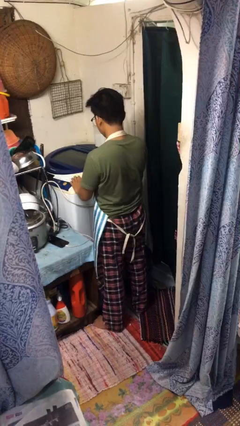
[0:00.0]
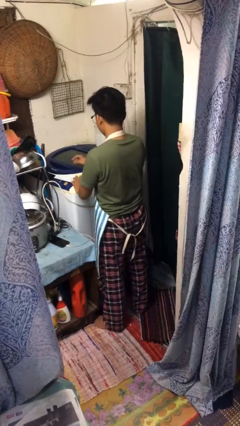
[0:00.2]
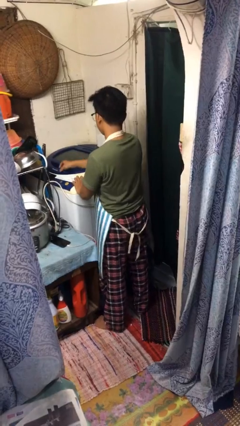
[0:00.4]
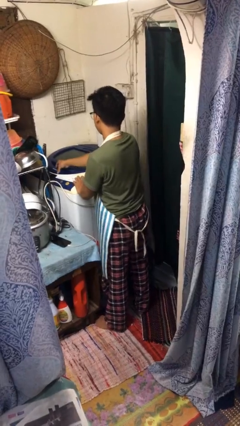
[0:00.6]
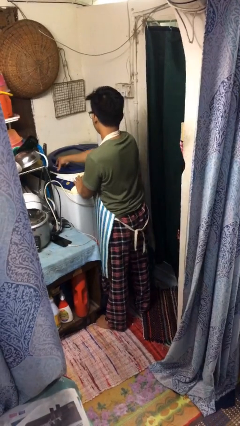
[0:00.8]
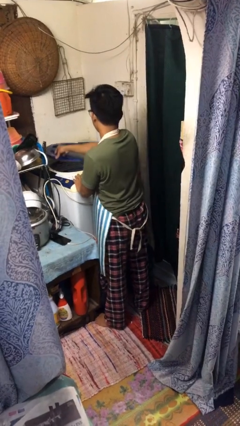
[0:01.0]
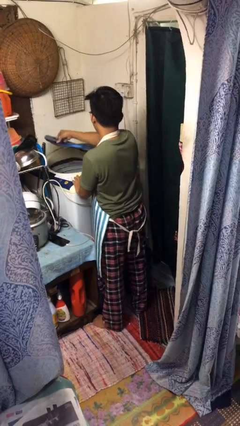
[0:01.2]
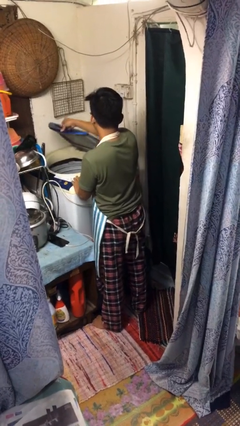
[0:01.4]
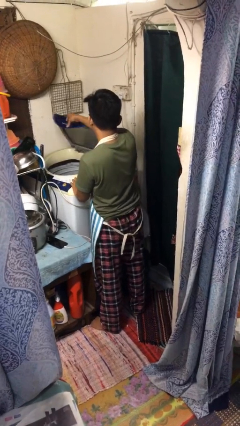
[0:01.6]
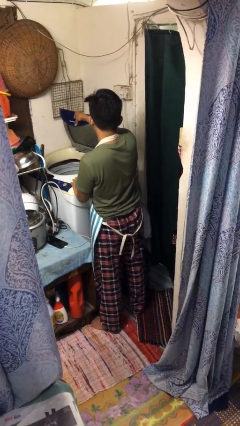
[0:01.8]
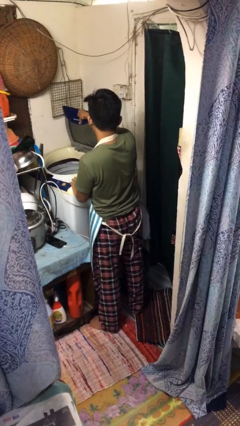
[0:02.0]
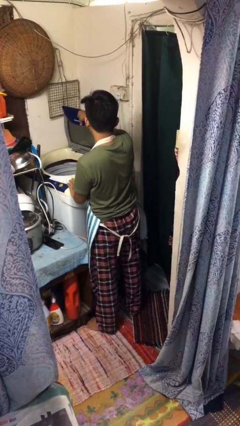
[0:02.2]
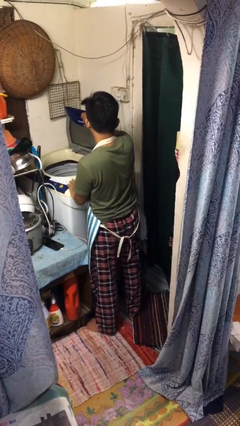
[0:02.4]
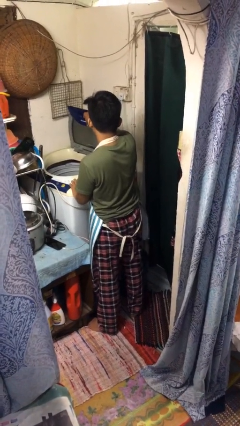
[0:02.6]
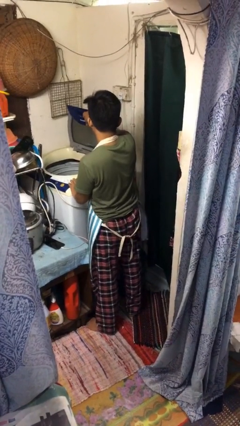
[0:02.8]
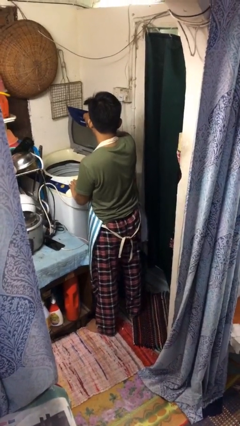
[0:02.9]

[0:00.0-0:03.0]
person opens clothes washer

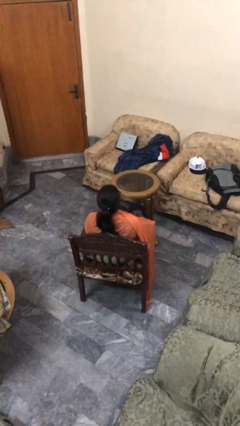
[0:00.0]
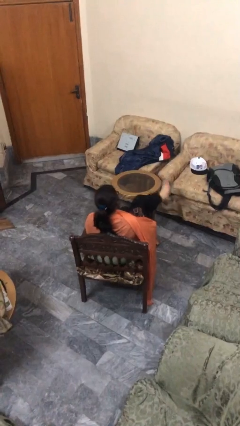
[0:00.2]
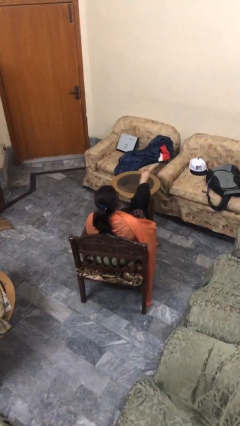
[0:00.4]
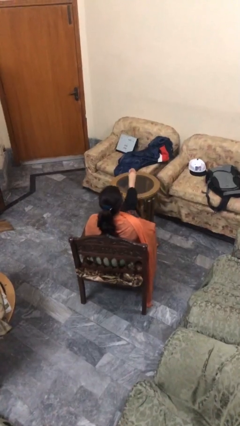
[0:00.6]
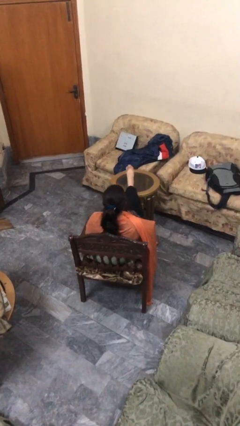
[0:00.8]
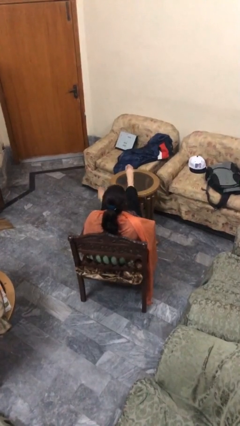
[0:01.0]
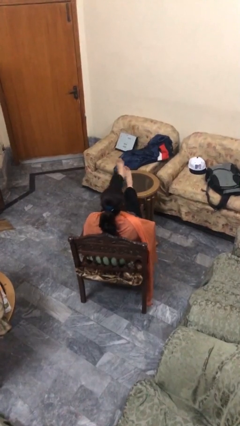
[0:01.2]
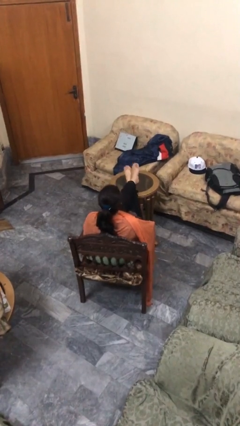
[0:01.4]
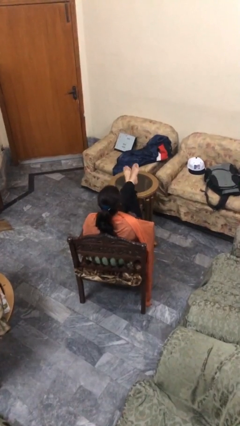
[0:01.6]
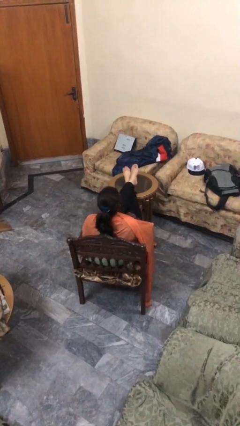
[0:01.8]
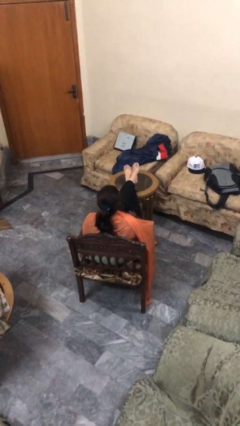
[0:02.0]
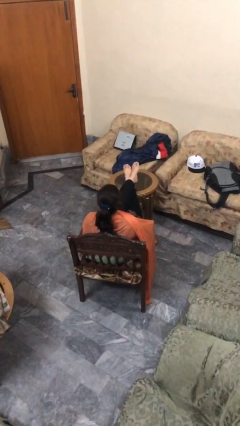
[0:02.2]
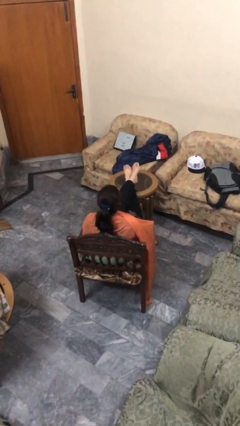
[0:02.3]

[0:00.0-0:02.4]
person puts feet up

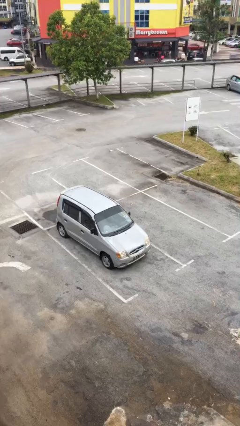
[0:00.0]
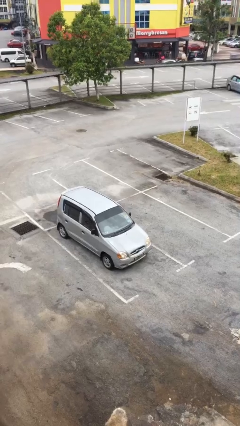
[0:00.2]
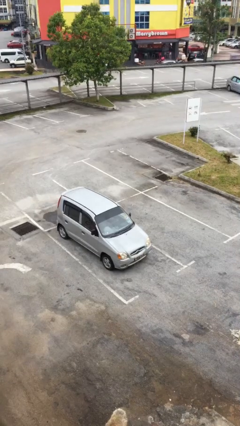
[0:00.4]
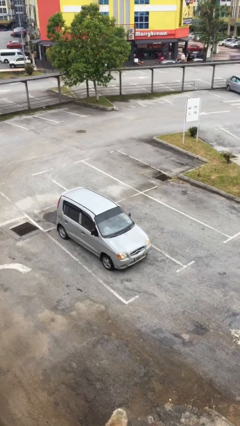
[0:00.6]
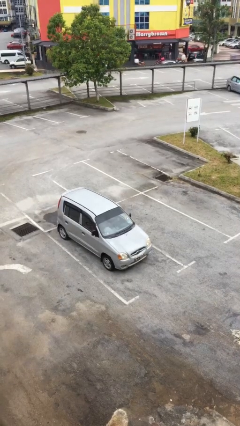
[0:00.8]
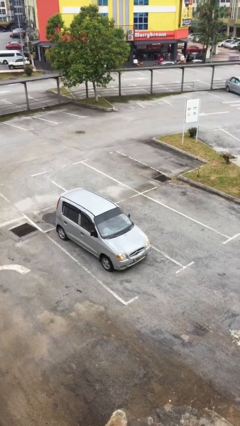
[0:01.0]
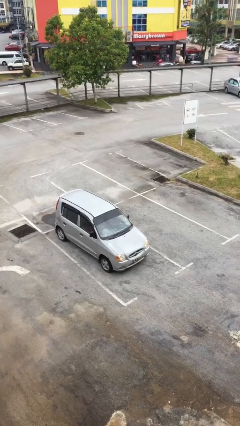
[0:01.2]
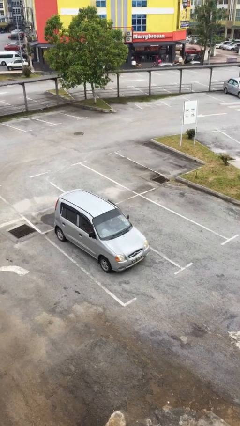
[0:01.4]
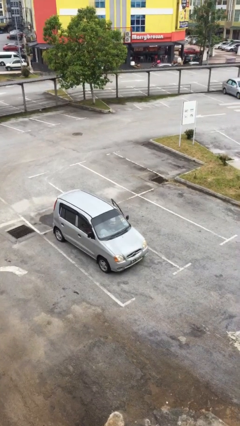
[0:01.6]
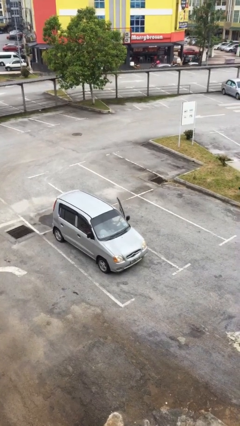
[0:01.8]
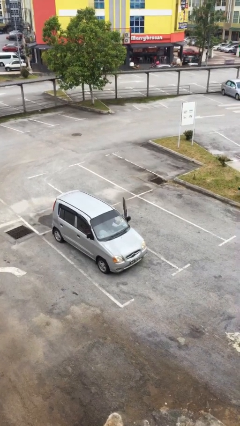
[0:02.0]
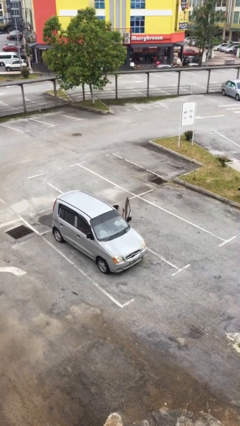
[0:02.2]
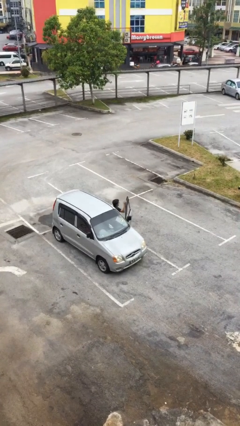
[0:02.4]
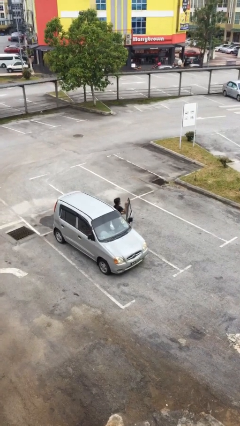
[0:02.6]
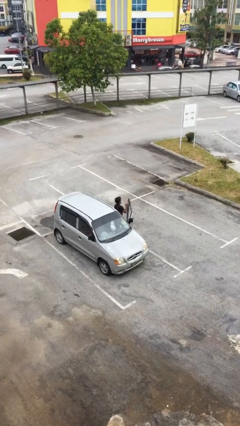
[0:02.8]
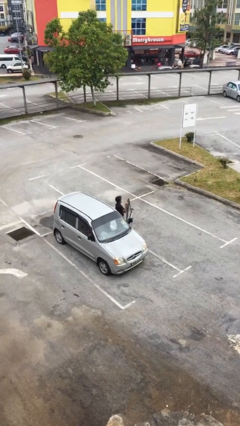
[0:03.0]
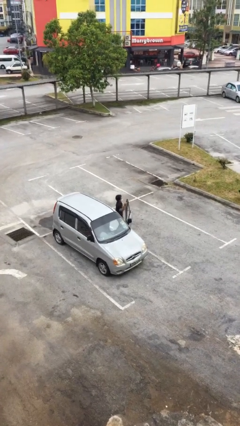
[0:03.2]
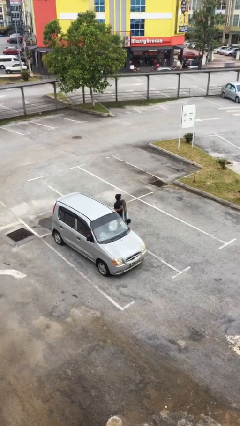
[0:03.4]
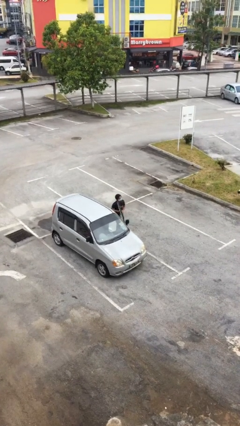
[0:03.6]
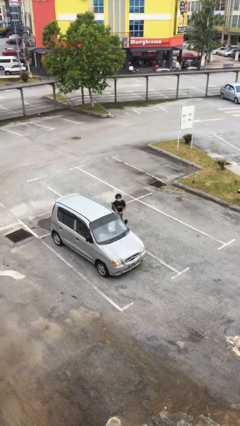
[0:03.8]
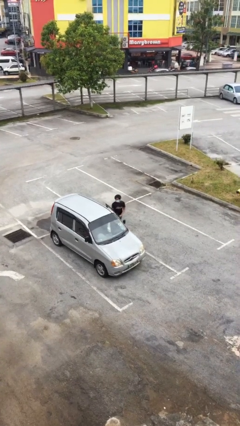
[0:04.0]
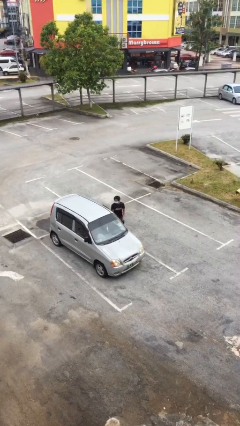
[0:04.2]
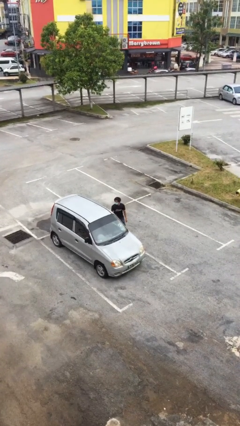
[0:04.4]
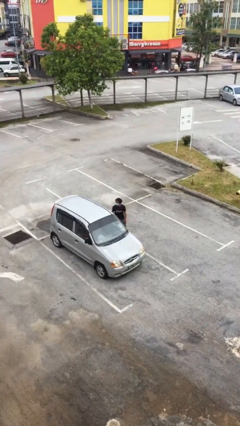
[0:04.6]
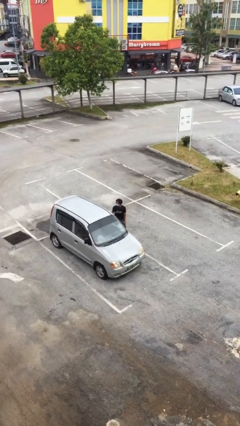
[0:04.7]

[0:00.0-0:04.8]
person exits car

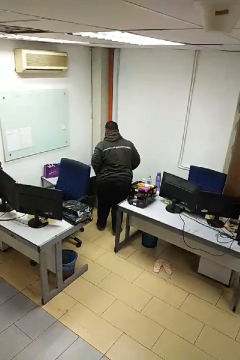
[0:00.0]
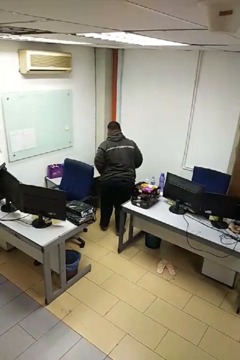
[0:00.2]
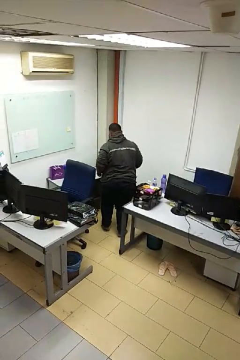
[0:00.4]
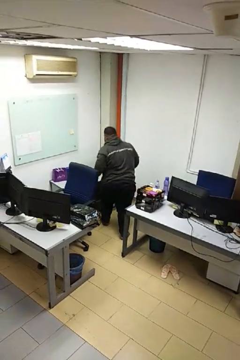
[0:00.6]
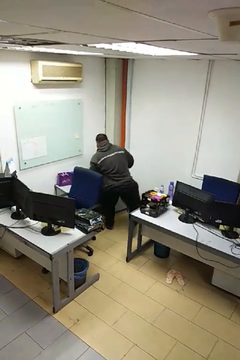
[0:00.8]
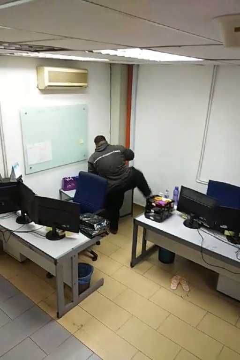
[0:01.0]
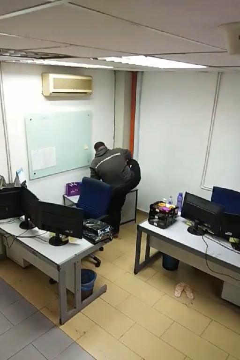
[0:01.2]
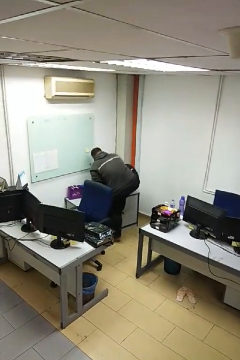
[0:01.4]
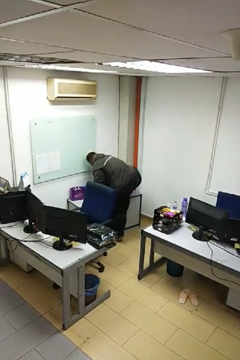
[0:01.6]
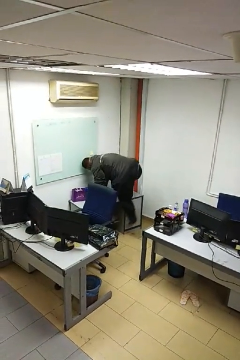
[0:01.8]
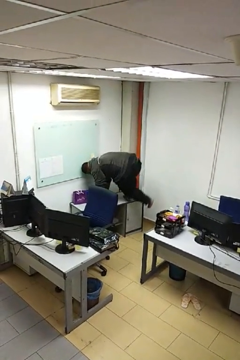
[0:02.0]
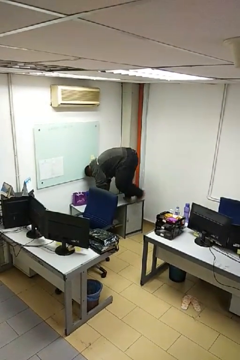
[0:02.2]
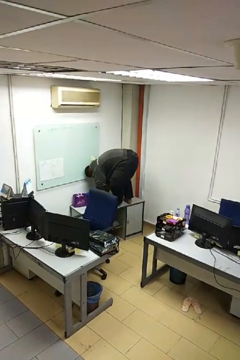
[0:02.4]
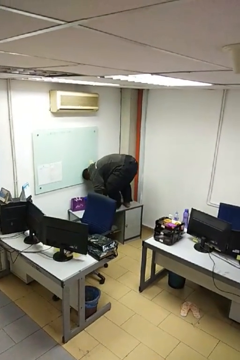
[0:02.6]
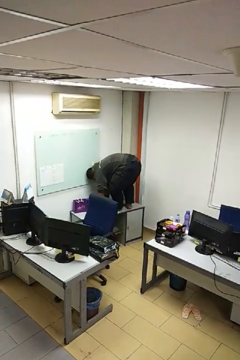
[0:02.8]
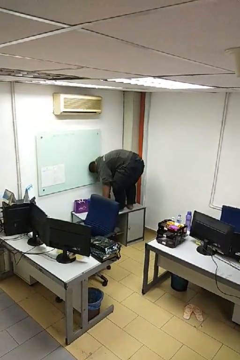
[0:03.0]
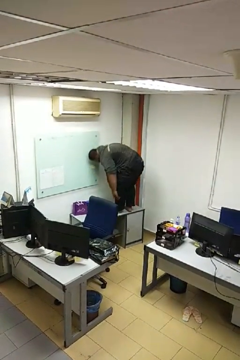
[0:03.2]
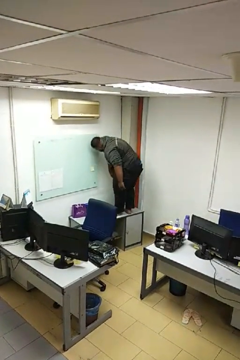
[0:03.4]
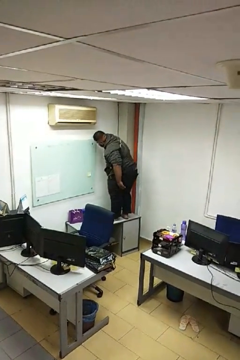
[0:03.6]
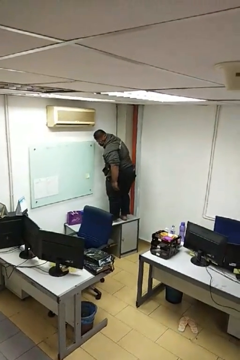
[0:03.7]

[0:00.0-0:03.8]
person climbs on table

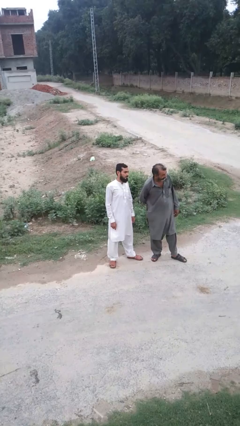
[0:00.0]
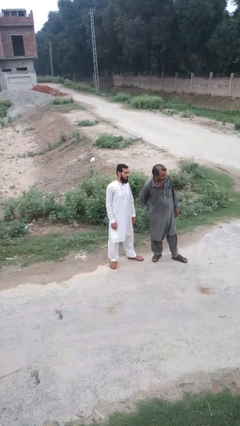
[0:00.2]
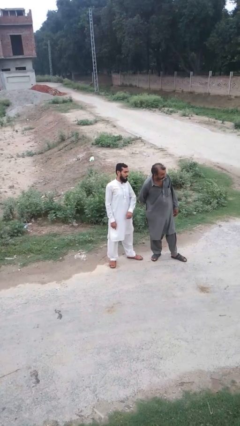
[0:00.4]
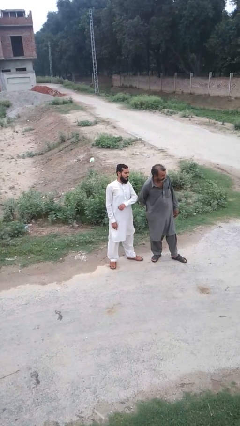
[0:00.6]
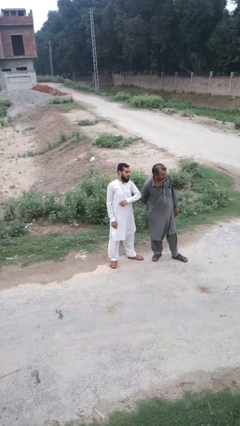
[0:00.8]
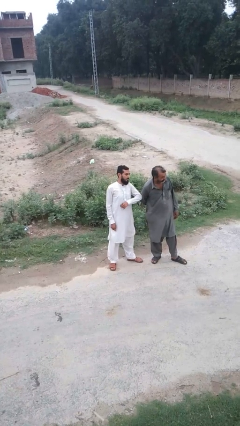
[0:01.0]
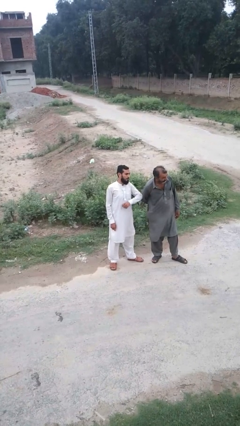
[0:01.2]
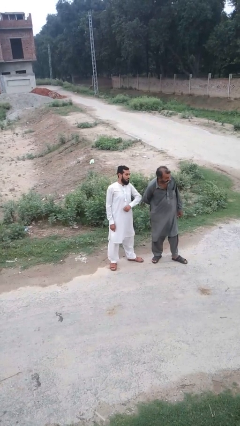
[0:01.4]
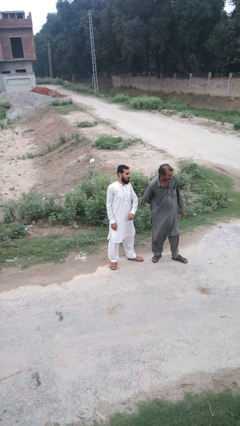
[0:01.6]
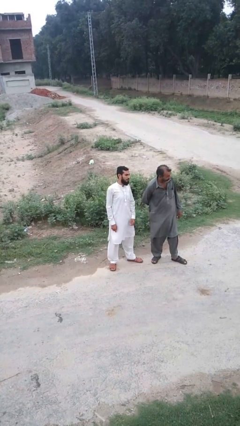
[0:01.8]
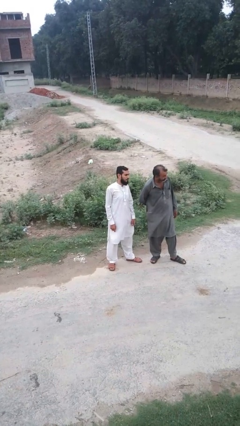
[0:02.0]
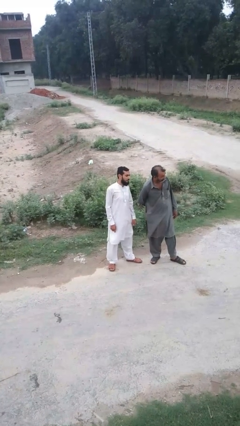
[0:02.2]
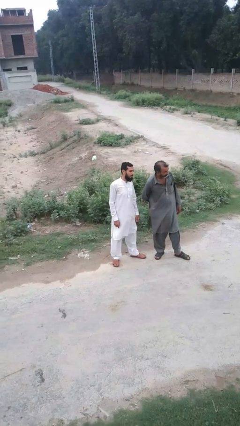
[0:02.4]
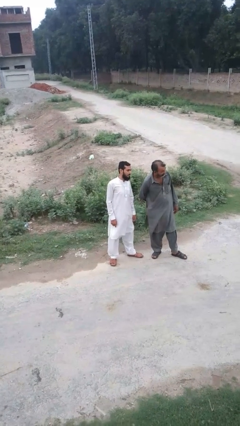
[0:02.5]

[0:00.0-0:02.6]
person nudges person with elbow

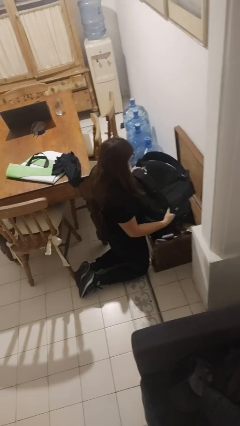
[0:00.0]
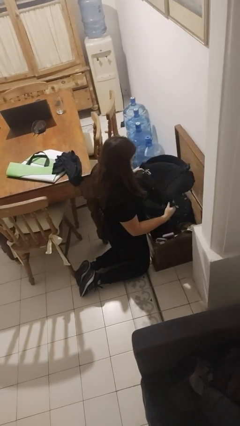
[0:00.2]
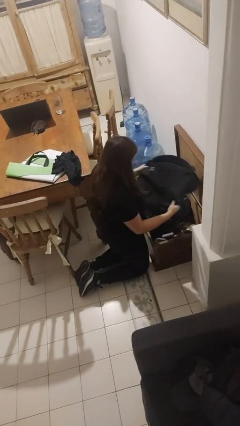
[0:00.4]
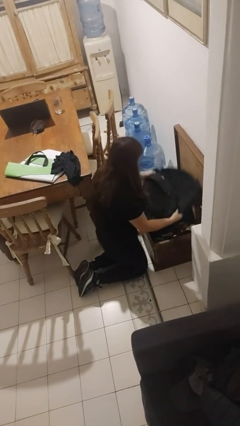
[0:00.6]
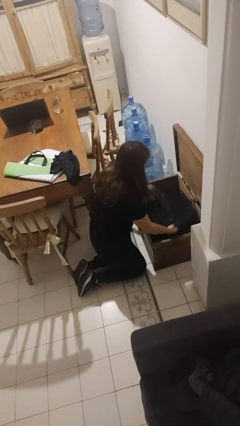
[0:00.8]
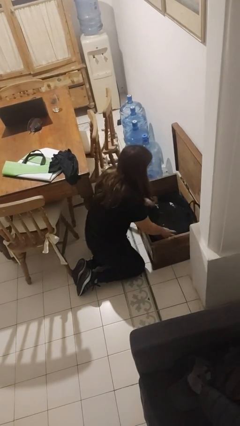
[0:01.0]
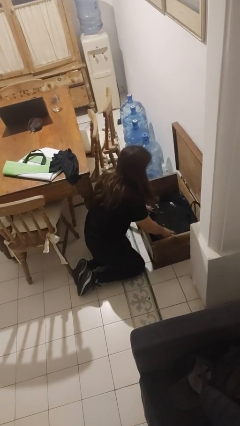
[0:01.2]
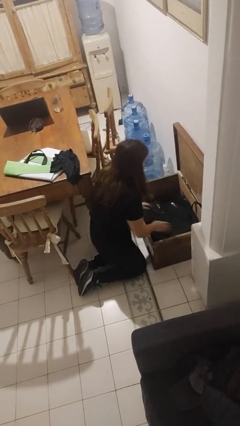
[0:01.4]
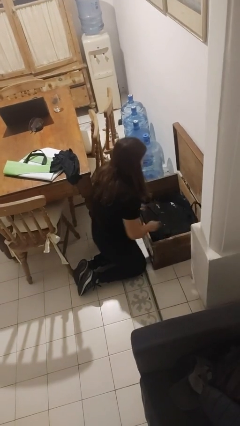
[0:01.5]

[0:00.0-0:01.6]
person puts object into box
